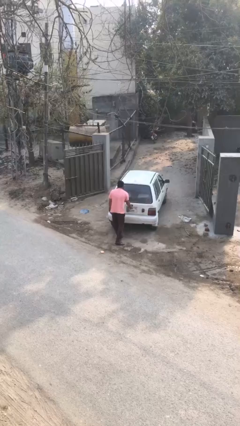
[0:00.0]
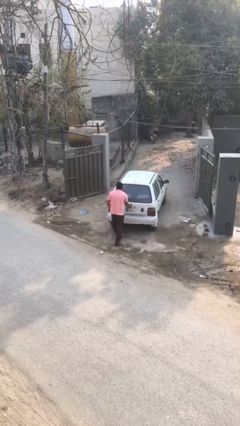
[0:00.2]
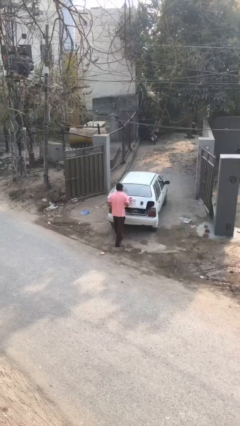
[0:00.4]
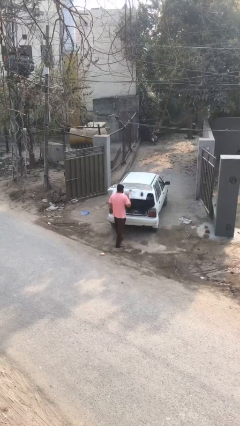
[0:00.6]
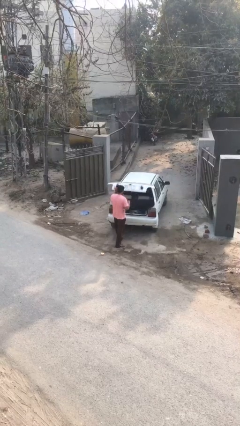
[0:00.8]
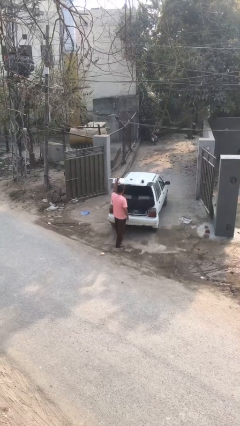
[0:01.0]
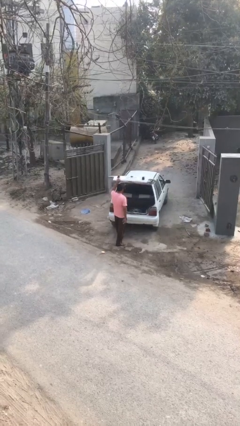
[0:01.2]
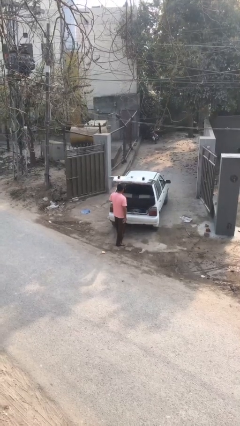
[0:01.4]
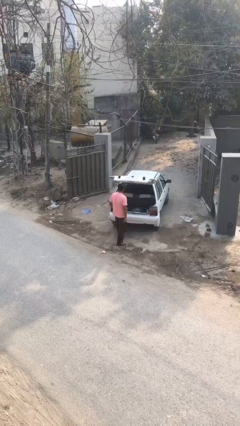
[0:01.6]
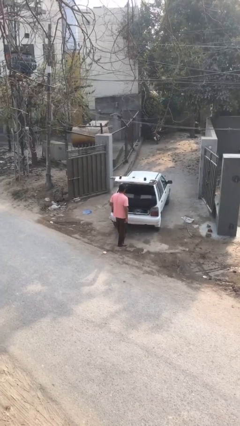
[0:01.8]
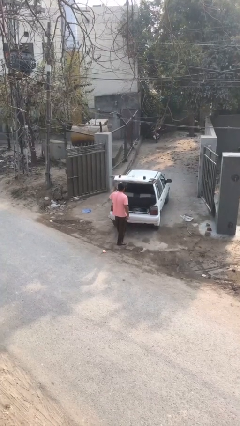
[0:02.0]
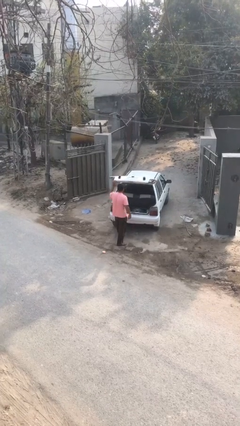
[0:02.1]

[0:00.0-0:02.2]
person opens car trunk

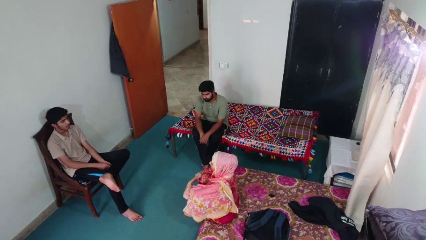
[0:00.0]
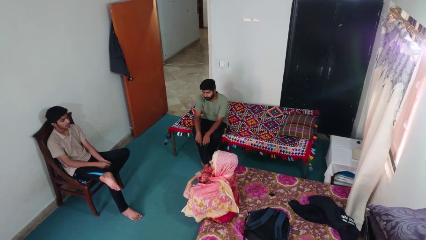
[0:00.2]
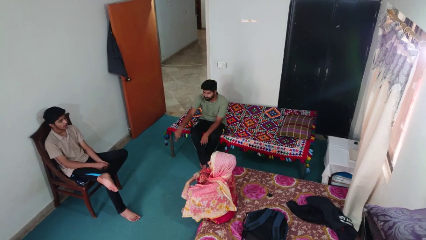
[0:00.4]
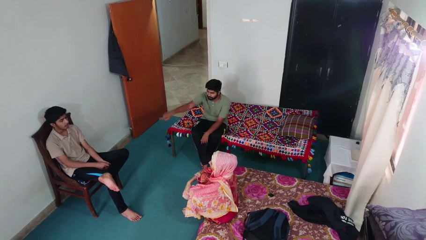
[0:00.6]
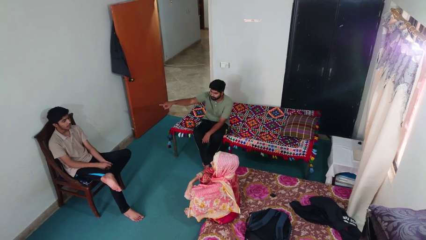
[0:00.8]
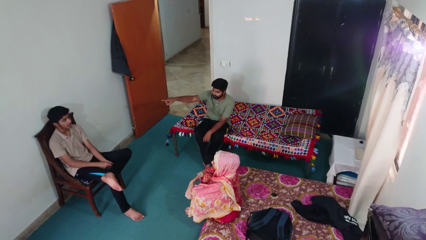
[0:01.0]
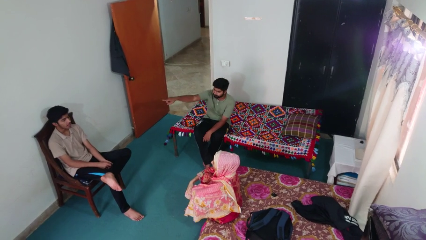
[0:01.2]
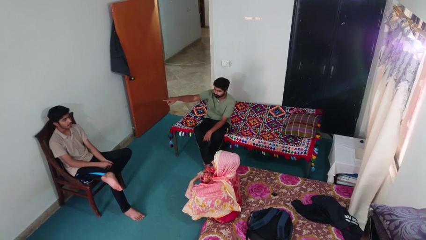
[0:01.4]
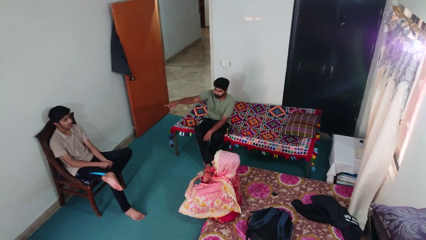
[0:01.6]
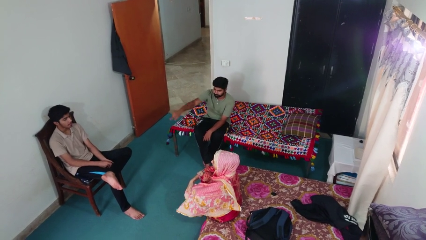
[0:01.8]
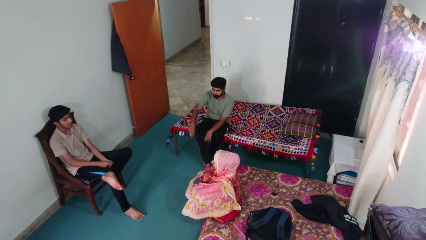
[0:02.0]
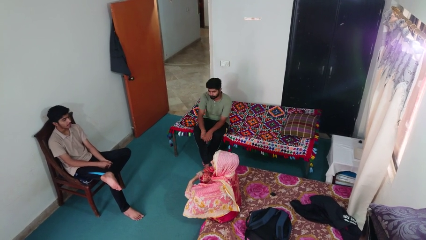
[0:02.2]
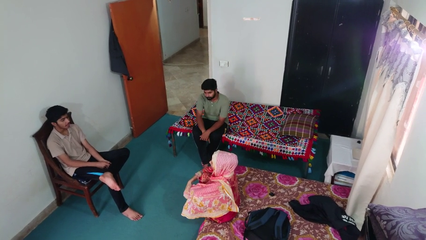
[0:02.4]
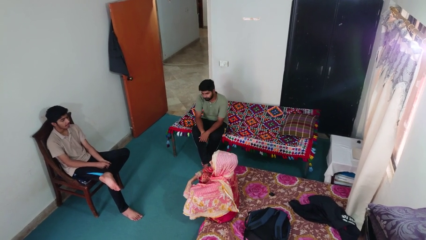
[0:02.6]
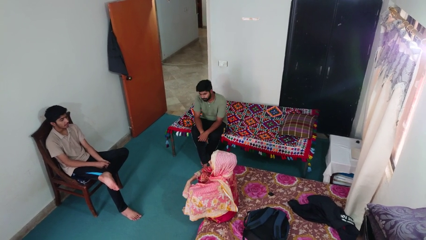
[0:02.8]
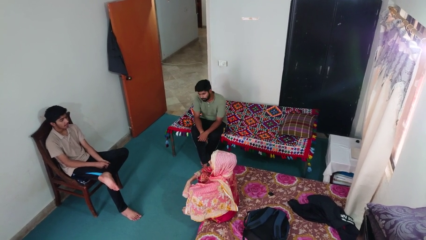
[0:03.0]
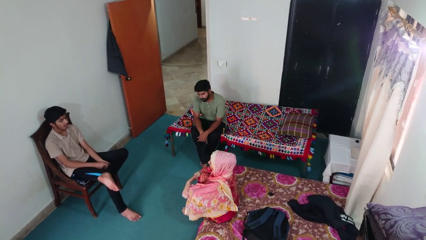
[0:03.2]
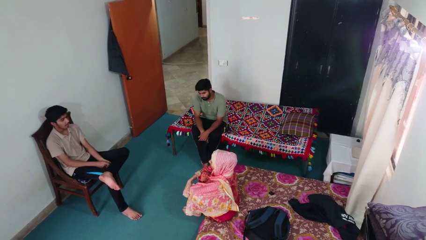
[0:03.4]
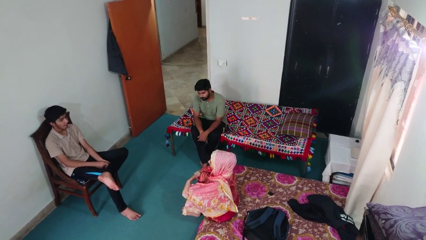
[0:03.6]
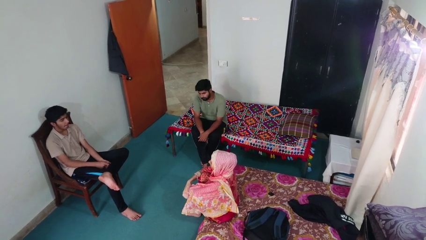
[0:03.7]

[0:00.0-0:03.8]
person points at person

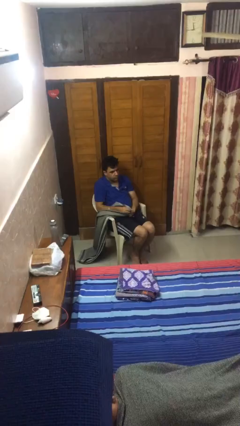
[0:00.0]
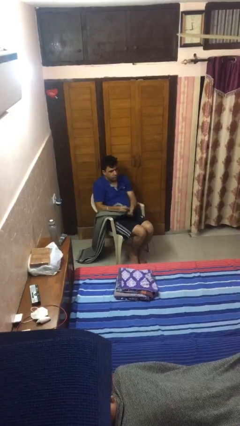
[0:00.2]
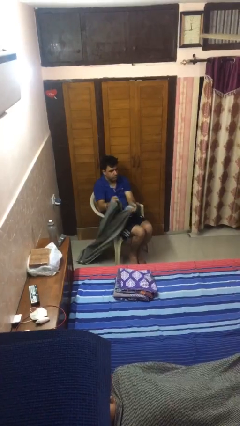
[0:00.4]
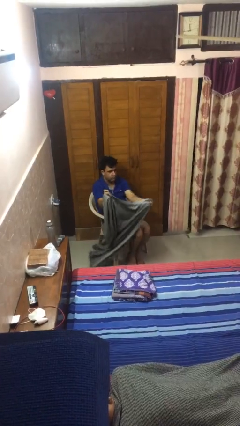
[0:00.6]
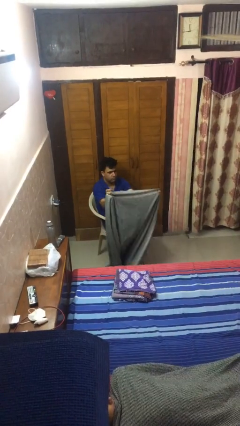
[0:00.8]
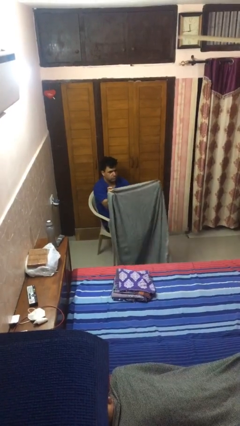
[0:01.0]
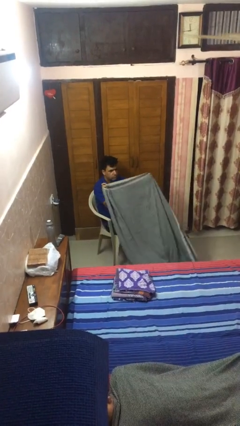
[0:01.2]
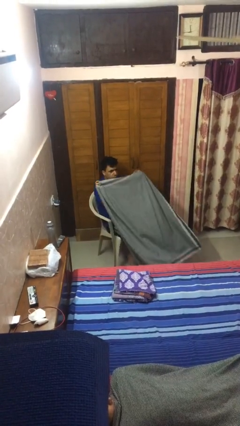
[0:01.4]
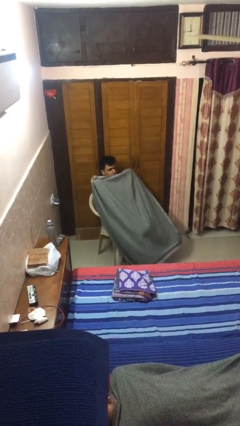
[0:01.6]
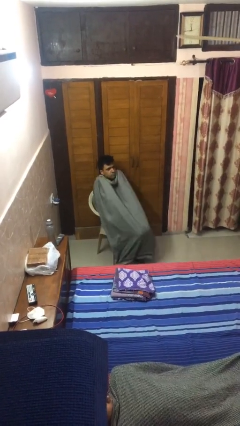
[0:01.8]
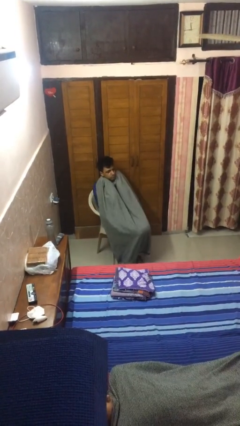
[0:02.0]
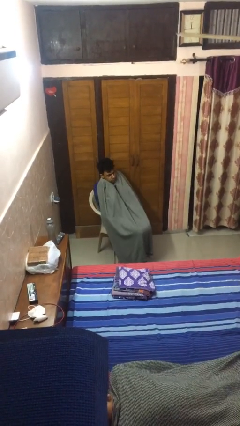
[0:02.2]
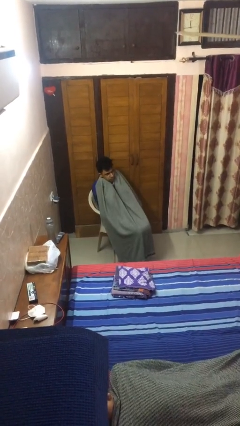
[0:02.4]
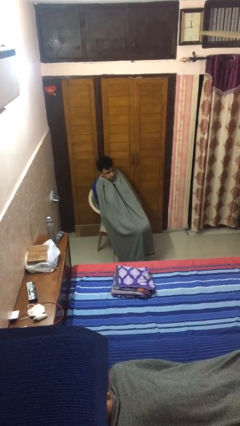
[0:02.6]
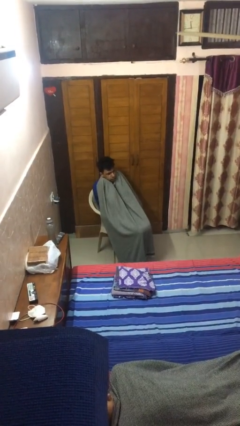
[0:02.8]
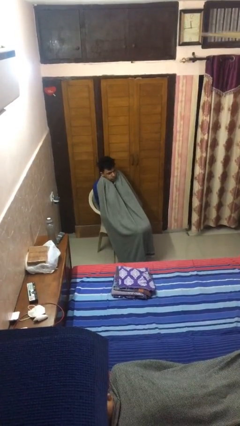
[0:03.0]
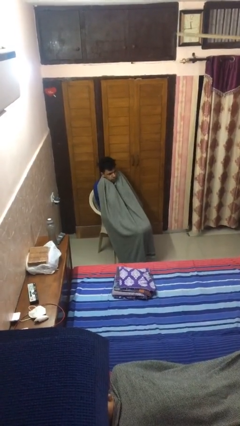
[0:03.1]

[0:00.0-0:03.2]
person covers with blanket

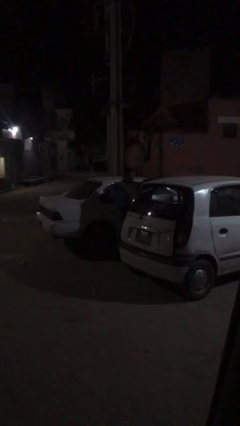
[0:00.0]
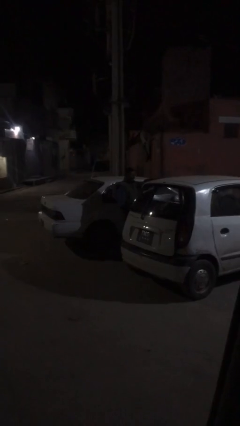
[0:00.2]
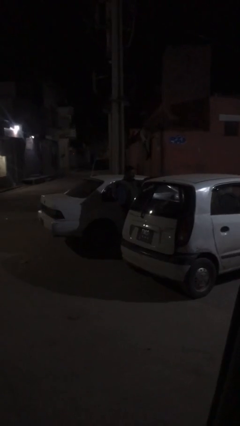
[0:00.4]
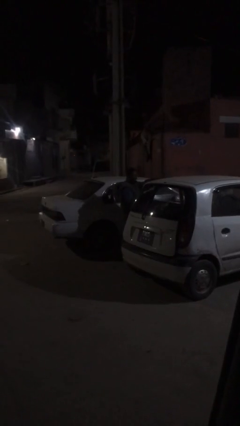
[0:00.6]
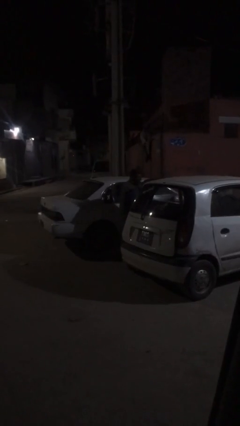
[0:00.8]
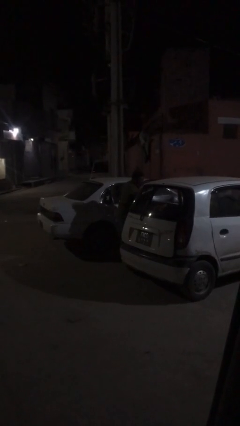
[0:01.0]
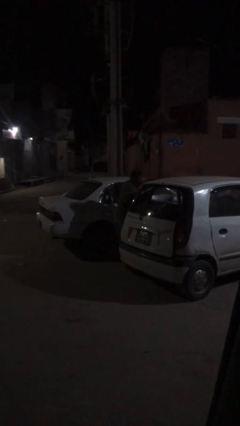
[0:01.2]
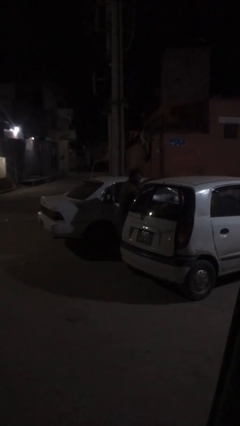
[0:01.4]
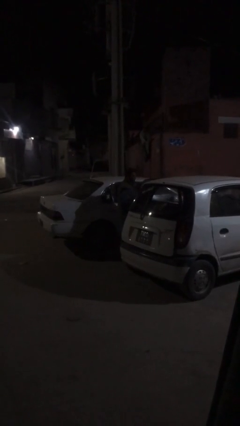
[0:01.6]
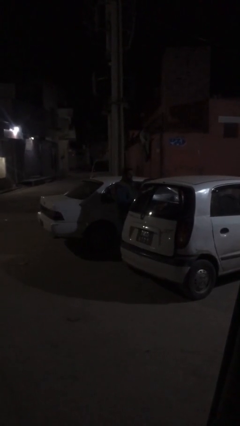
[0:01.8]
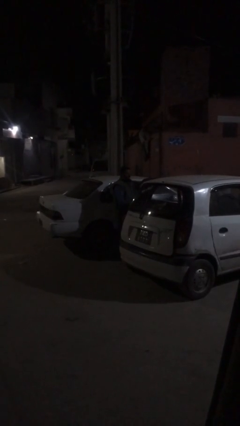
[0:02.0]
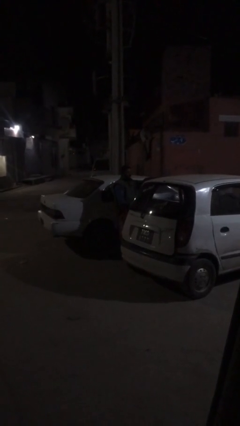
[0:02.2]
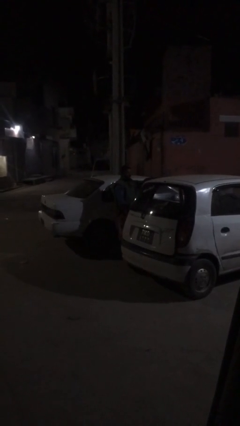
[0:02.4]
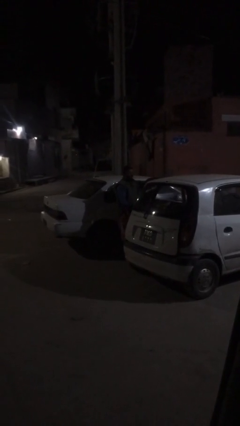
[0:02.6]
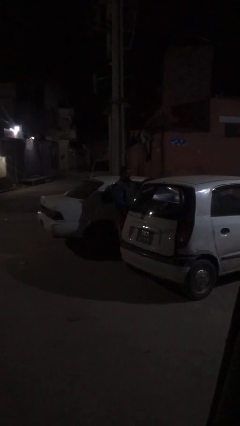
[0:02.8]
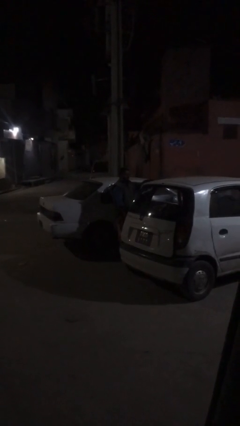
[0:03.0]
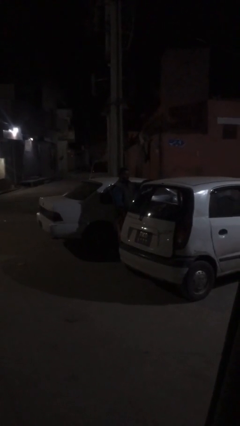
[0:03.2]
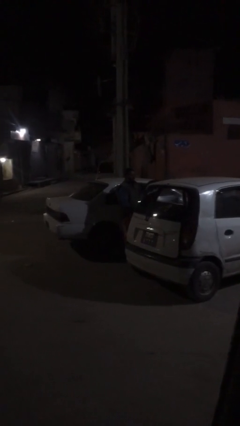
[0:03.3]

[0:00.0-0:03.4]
person unloads car

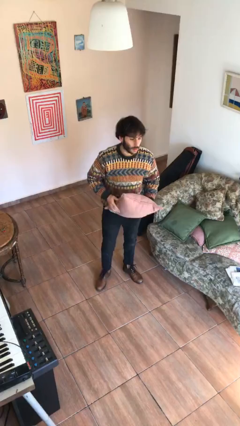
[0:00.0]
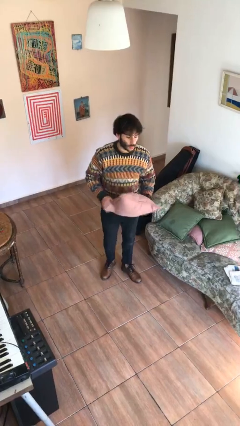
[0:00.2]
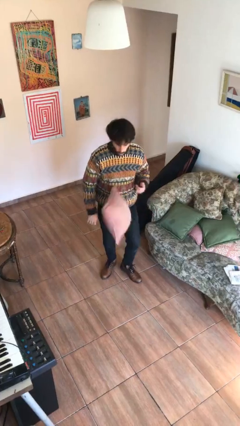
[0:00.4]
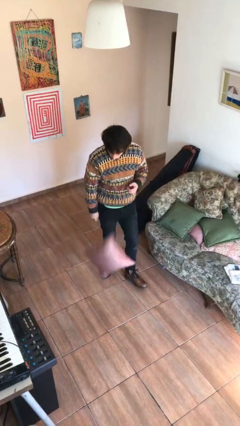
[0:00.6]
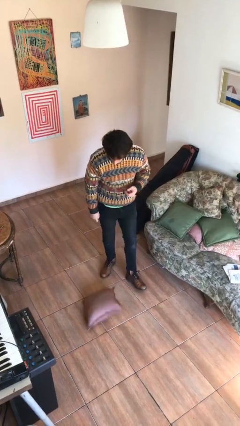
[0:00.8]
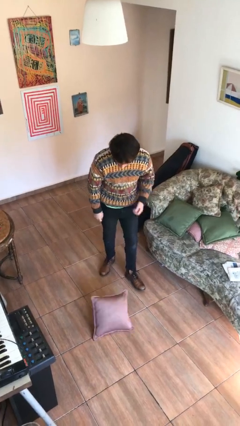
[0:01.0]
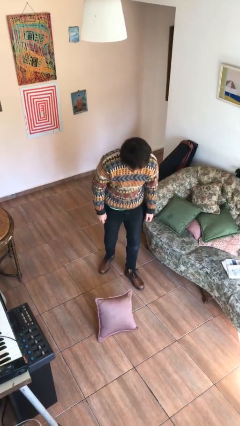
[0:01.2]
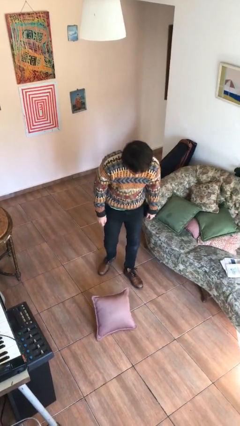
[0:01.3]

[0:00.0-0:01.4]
person drops object

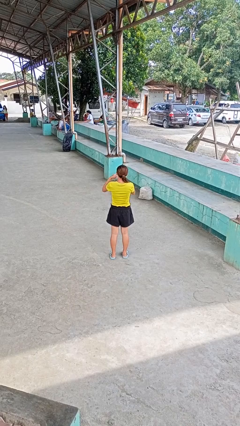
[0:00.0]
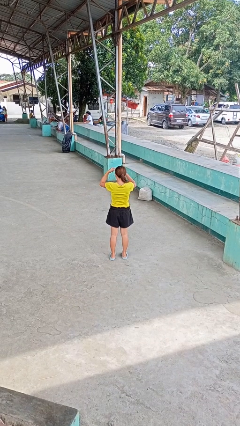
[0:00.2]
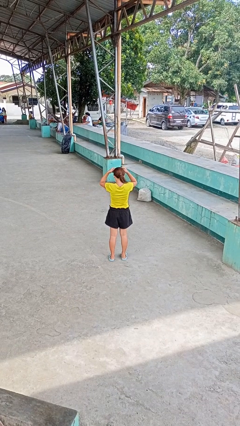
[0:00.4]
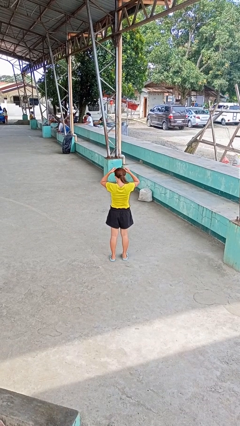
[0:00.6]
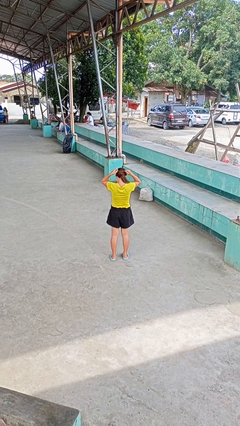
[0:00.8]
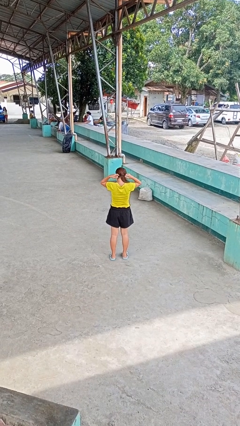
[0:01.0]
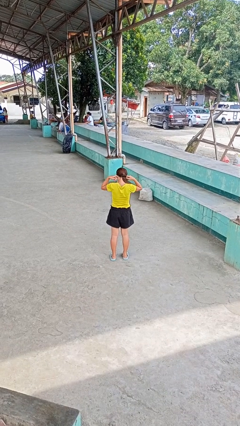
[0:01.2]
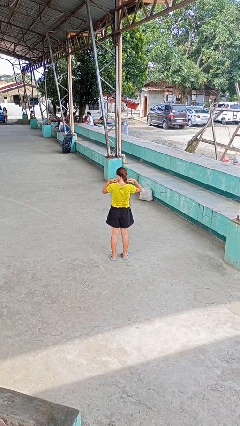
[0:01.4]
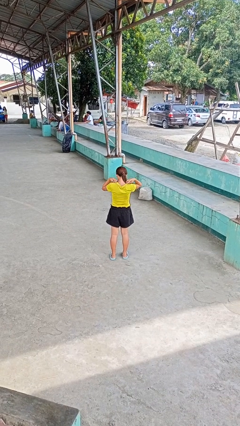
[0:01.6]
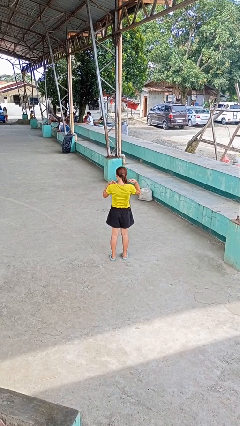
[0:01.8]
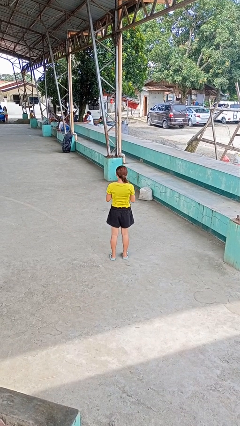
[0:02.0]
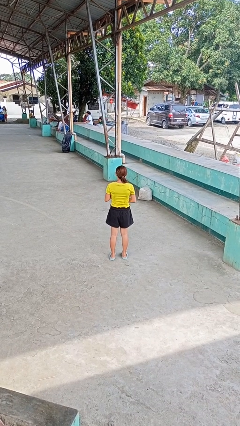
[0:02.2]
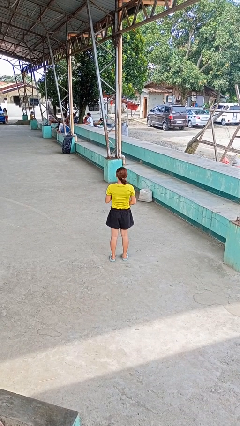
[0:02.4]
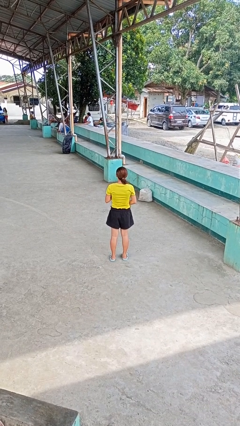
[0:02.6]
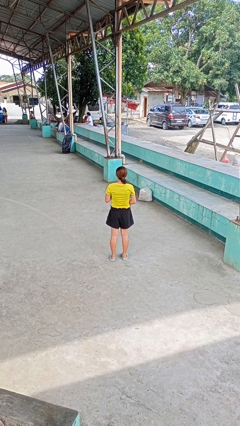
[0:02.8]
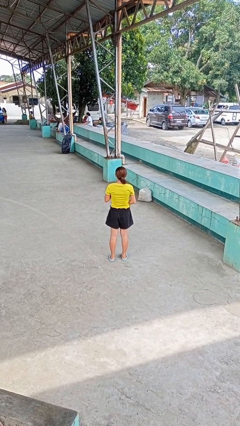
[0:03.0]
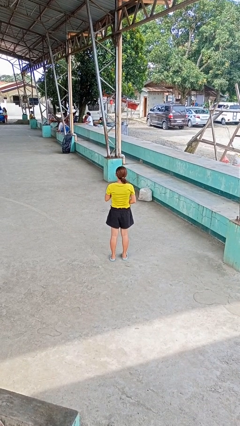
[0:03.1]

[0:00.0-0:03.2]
person puts on necklace
